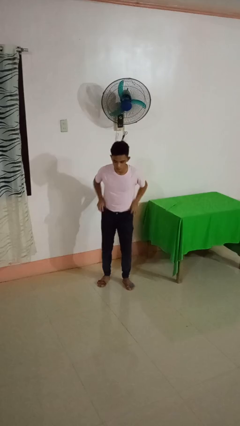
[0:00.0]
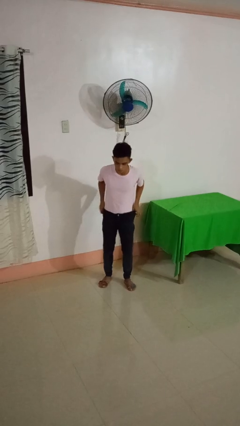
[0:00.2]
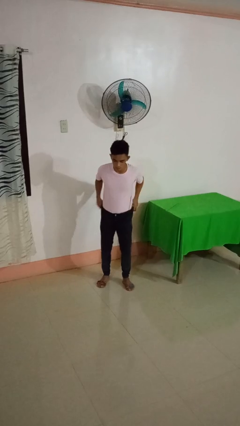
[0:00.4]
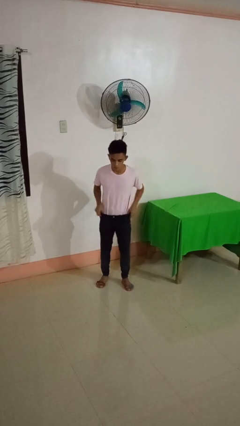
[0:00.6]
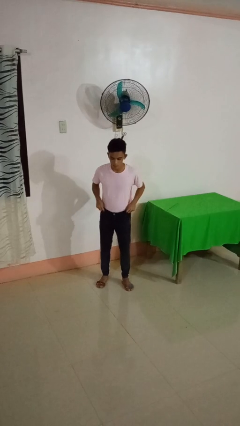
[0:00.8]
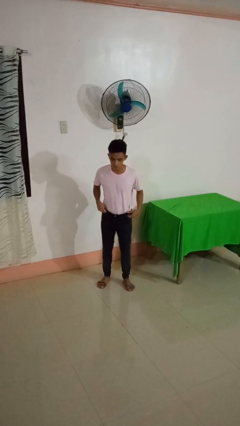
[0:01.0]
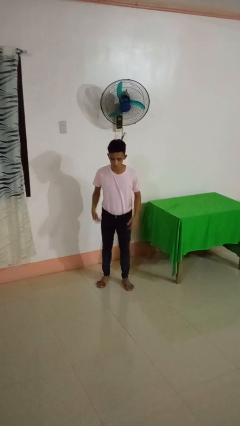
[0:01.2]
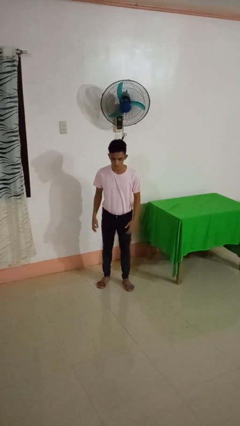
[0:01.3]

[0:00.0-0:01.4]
person hikes up pants

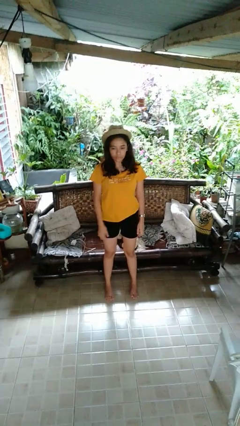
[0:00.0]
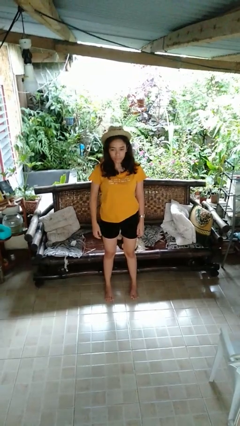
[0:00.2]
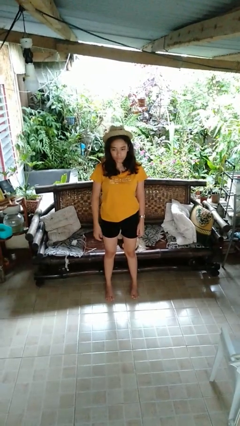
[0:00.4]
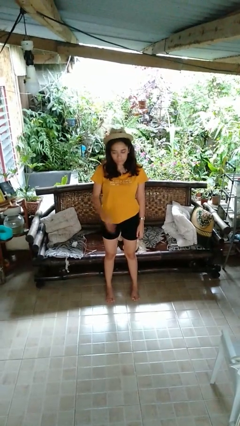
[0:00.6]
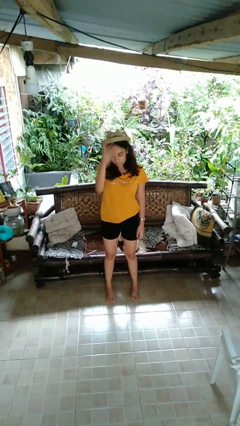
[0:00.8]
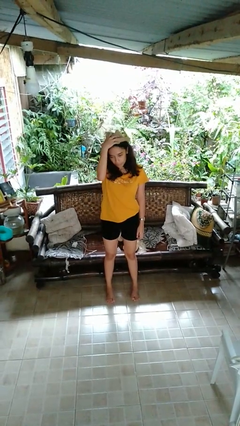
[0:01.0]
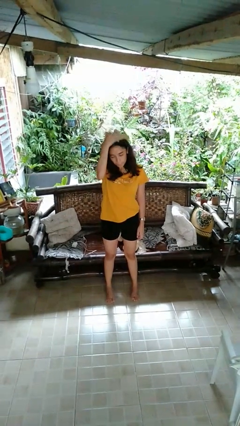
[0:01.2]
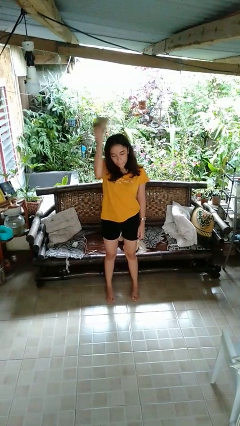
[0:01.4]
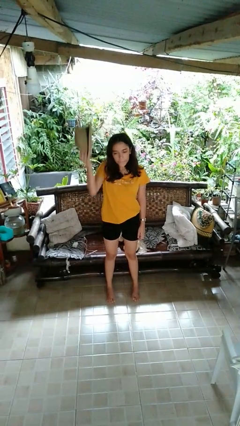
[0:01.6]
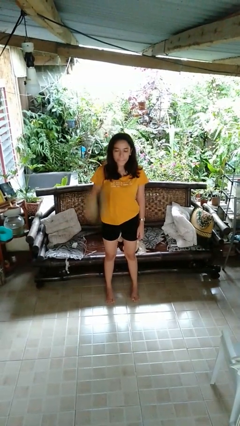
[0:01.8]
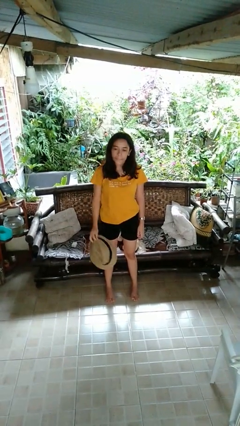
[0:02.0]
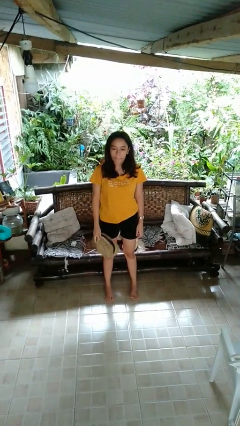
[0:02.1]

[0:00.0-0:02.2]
person takes off hat

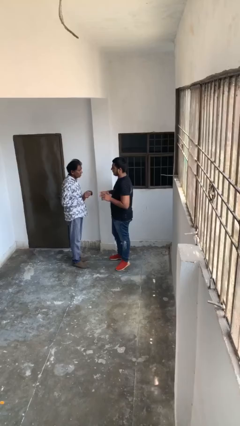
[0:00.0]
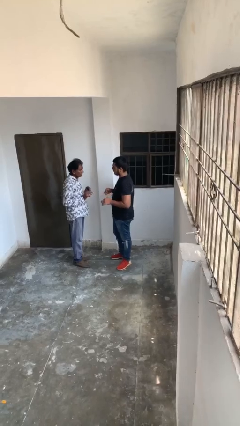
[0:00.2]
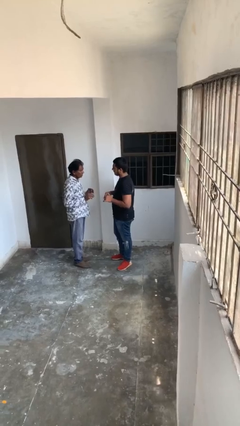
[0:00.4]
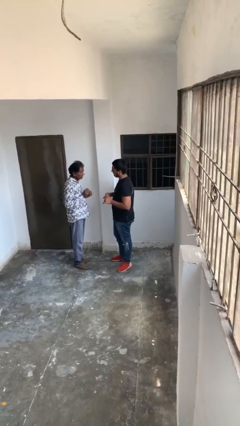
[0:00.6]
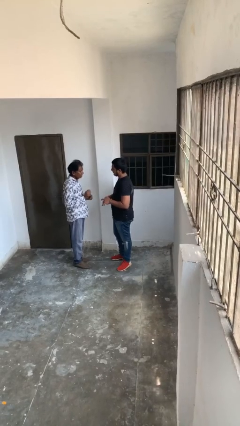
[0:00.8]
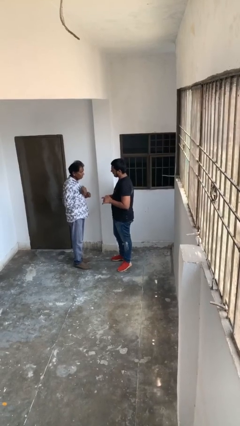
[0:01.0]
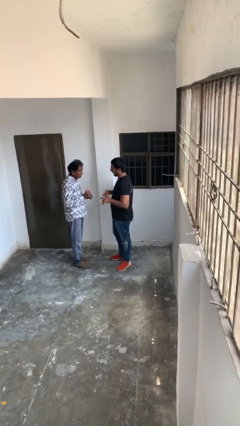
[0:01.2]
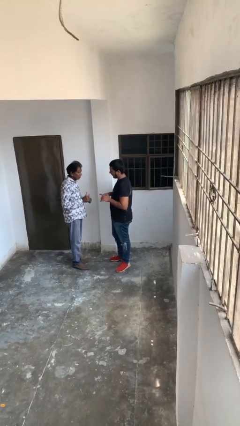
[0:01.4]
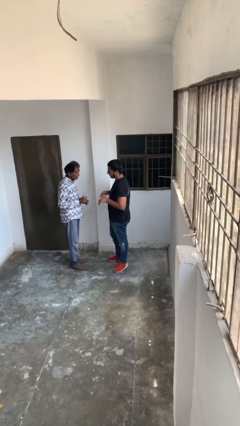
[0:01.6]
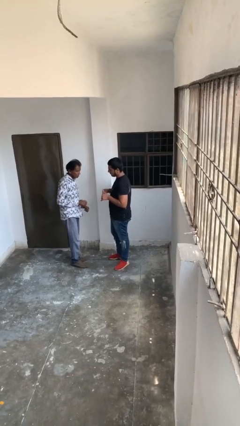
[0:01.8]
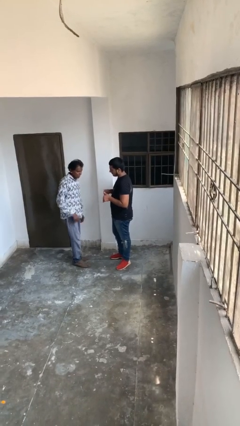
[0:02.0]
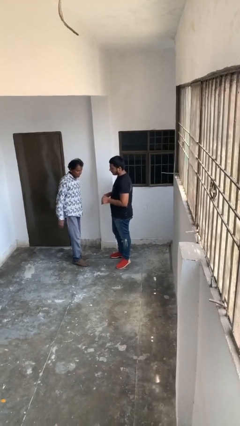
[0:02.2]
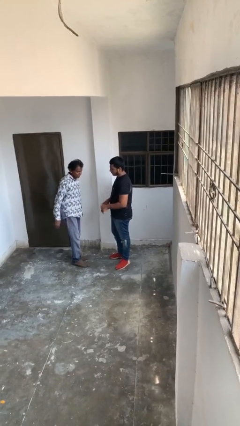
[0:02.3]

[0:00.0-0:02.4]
person talks to person

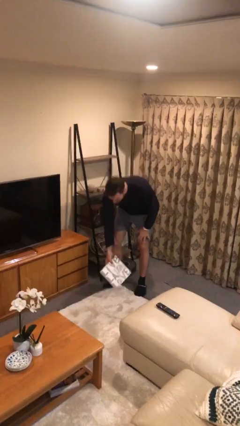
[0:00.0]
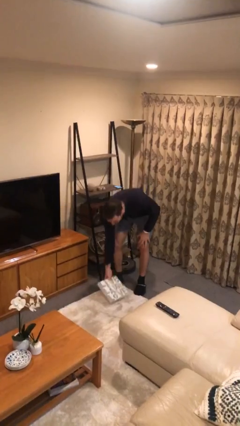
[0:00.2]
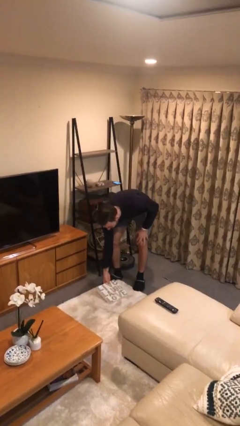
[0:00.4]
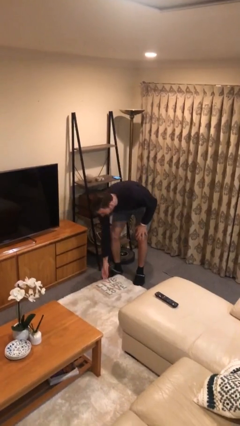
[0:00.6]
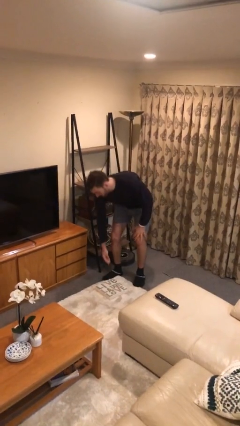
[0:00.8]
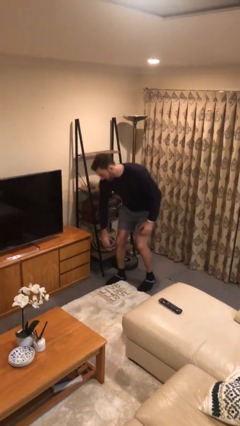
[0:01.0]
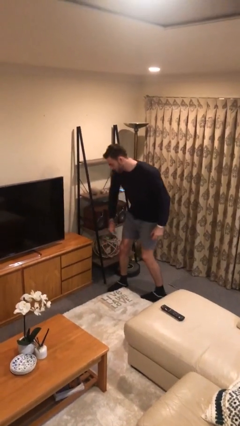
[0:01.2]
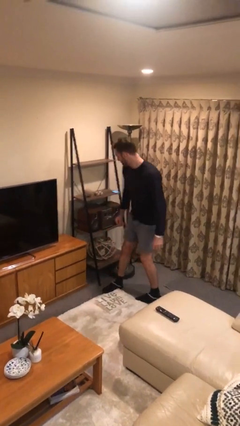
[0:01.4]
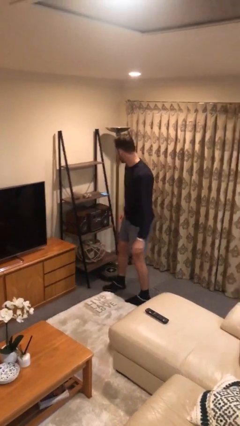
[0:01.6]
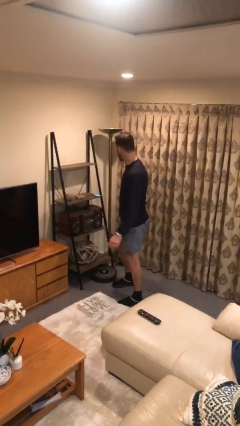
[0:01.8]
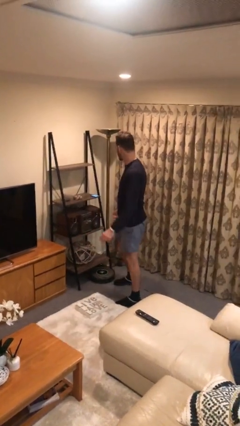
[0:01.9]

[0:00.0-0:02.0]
person puts down object on floor

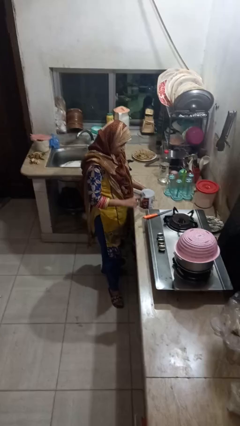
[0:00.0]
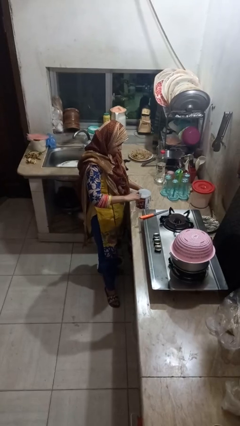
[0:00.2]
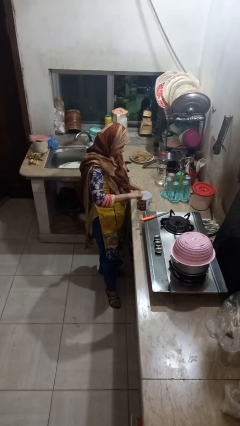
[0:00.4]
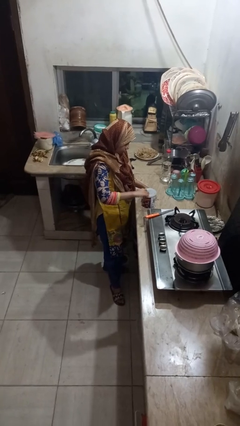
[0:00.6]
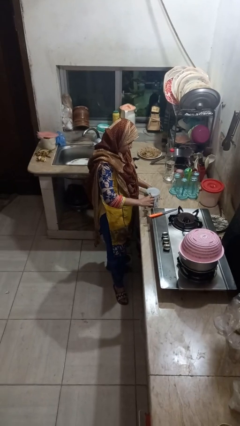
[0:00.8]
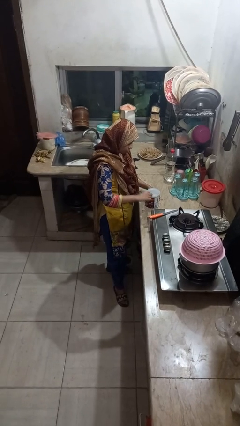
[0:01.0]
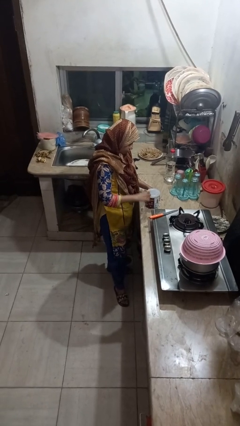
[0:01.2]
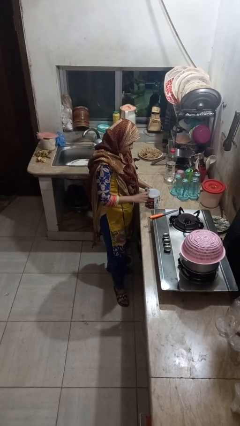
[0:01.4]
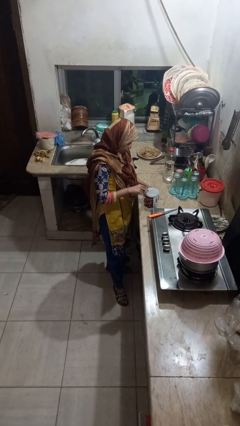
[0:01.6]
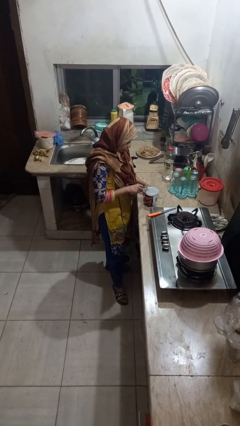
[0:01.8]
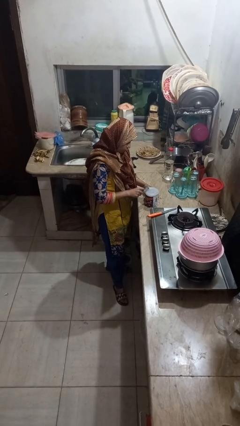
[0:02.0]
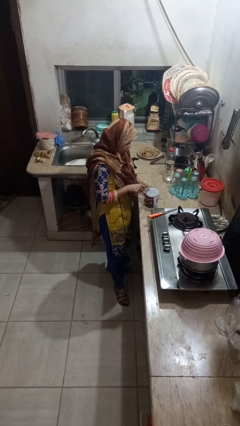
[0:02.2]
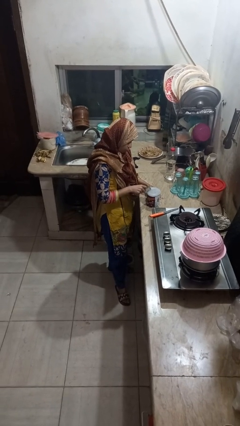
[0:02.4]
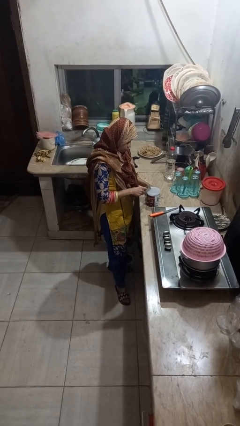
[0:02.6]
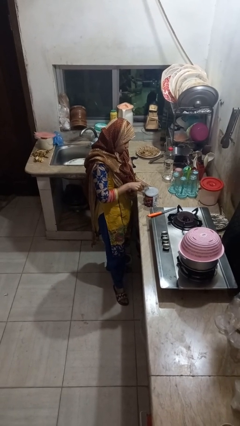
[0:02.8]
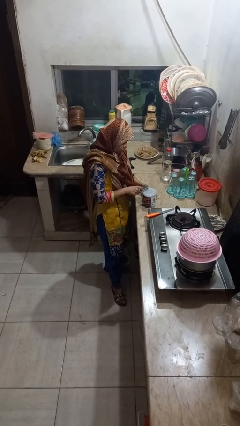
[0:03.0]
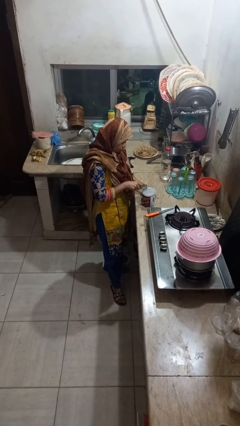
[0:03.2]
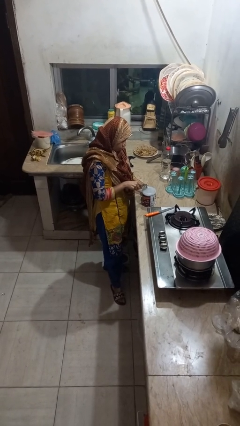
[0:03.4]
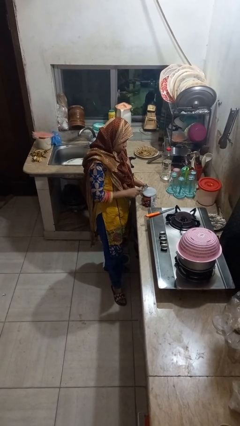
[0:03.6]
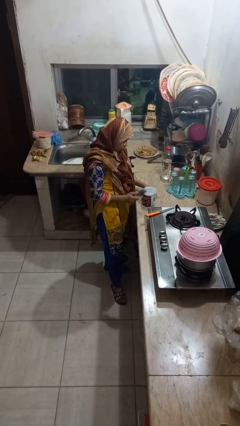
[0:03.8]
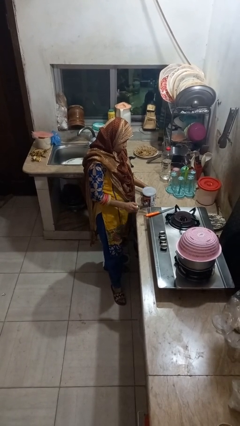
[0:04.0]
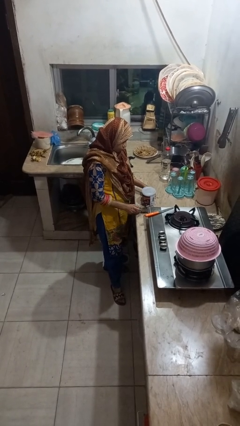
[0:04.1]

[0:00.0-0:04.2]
person opens can with can opener

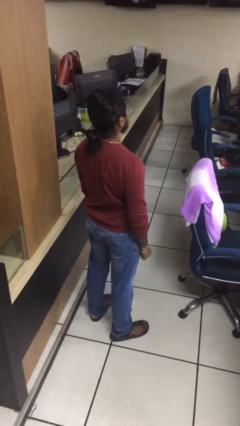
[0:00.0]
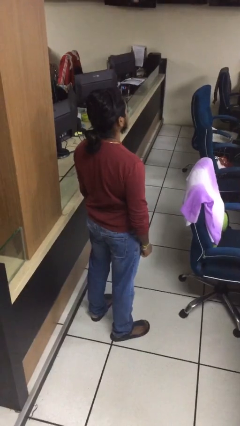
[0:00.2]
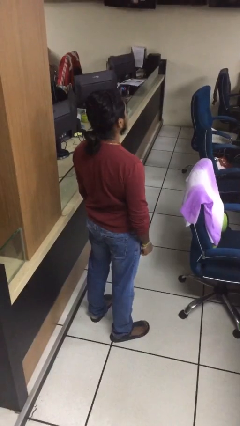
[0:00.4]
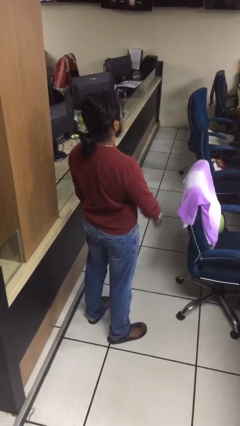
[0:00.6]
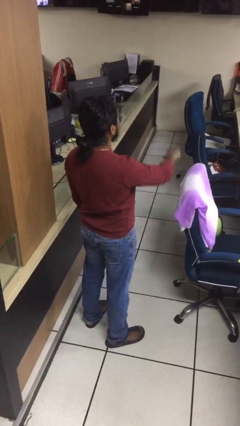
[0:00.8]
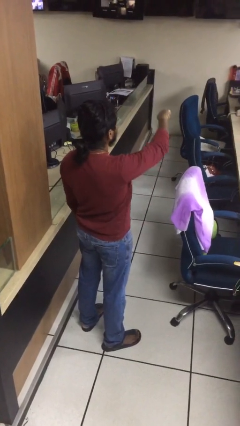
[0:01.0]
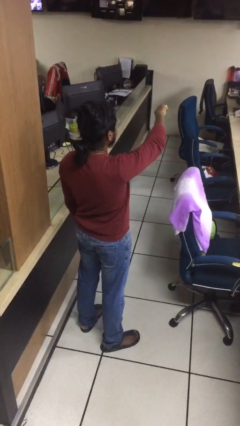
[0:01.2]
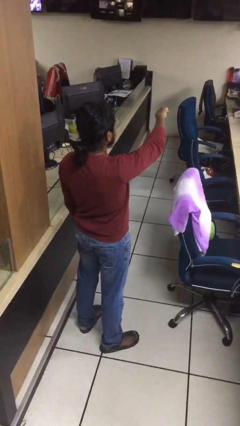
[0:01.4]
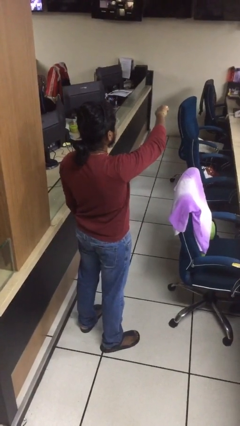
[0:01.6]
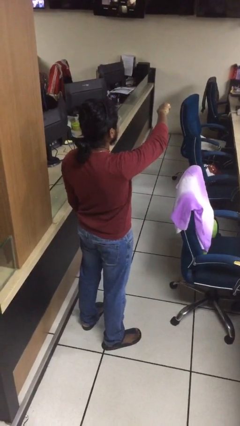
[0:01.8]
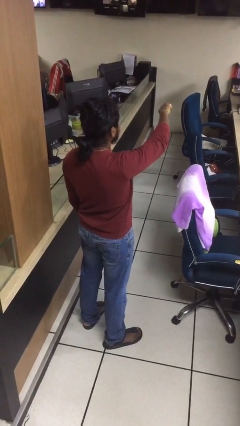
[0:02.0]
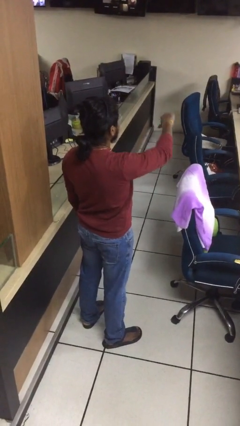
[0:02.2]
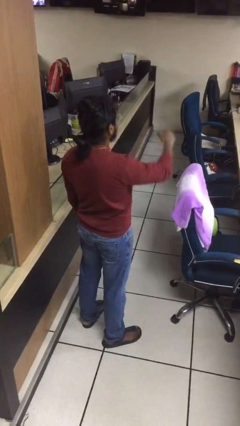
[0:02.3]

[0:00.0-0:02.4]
person gestures thumbs down

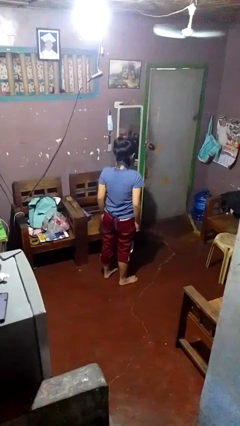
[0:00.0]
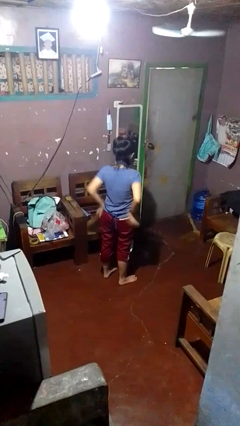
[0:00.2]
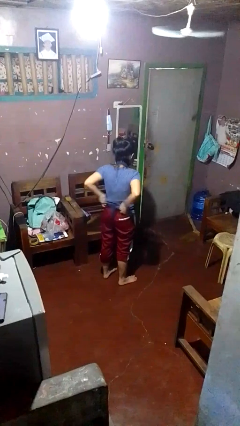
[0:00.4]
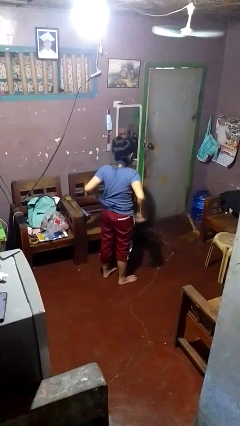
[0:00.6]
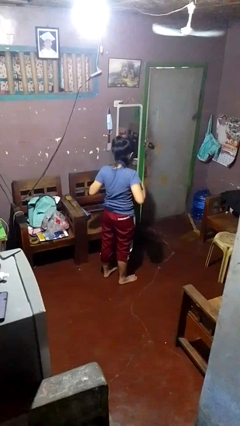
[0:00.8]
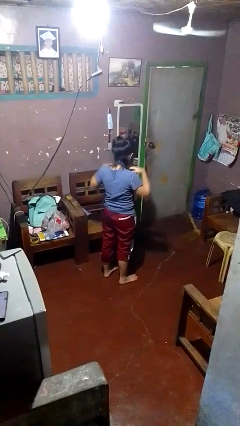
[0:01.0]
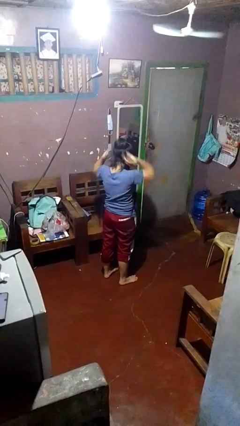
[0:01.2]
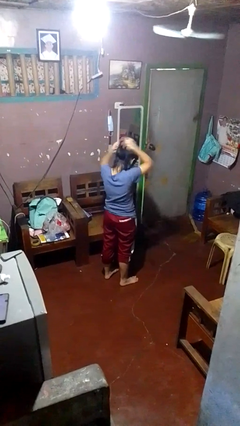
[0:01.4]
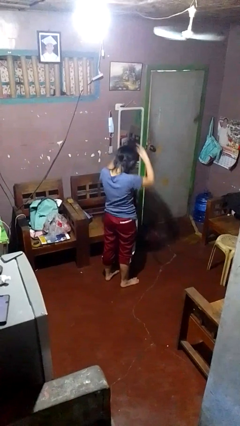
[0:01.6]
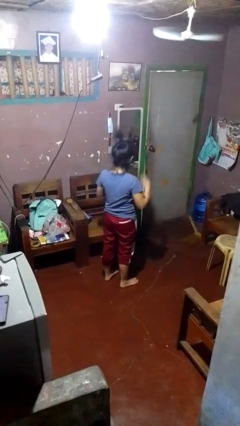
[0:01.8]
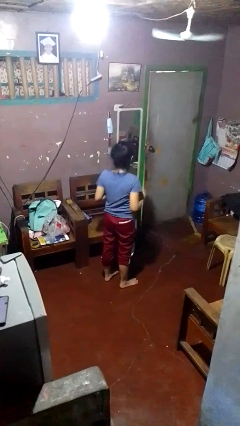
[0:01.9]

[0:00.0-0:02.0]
person takes off apron

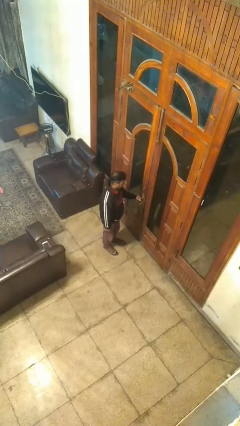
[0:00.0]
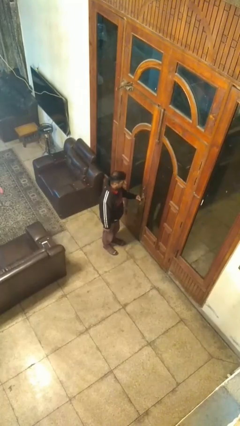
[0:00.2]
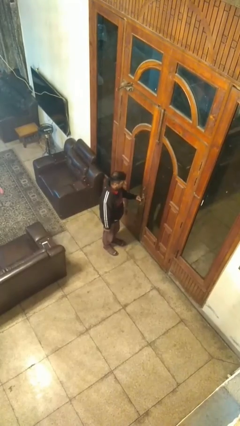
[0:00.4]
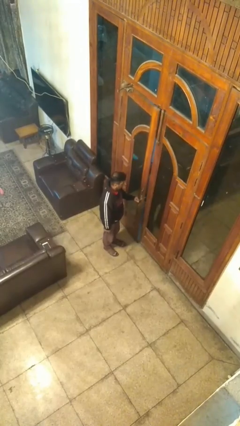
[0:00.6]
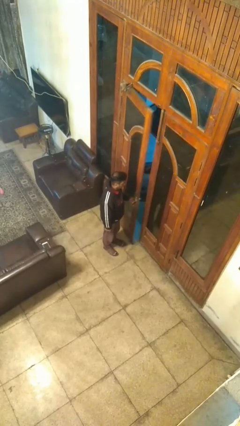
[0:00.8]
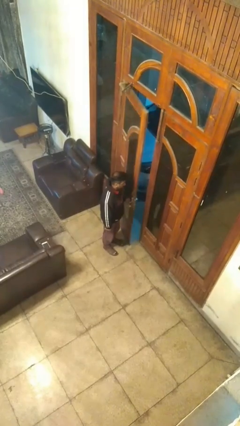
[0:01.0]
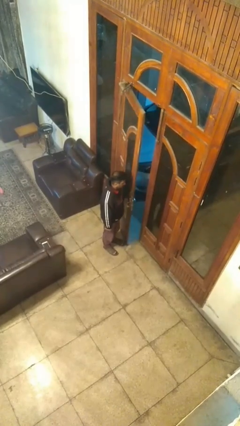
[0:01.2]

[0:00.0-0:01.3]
person opens facility door
